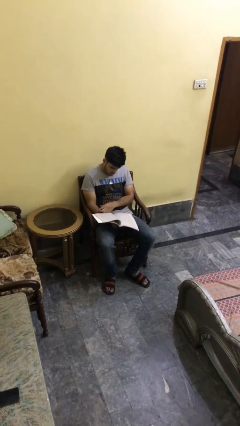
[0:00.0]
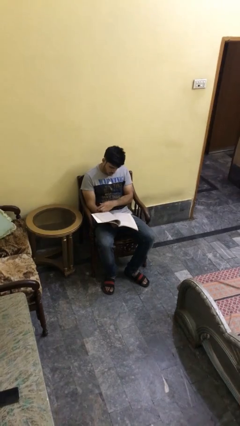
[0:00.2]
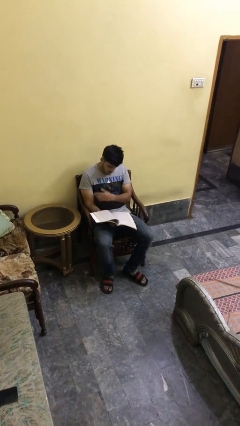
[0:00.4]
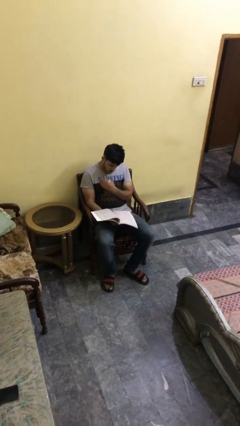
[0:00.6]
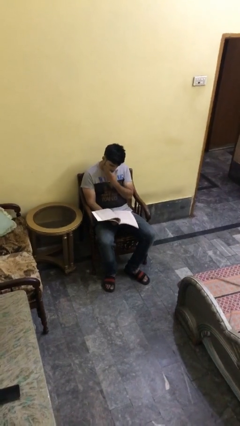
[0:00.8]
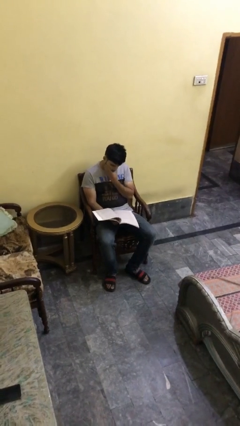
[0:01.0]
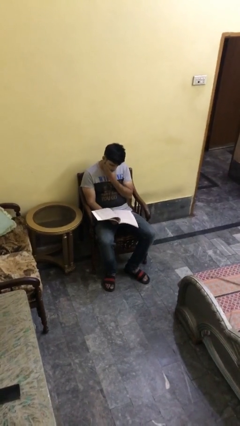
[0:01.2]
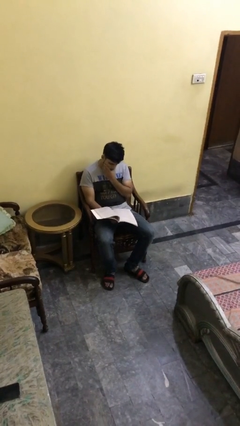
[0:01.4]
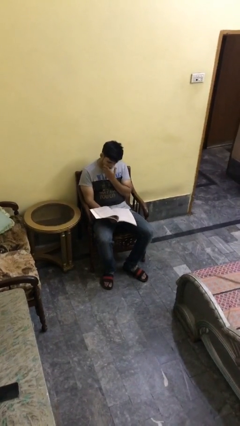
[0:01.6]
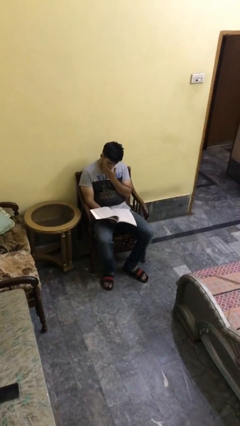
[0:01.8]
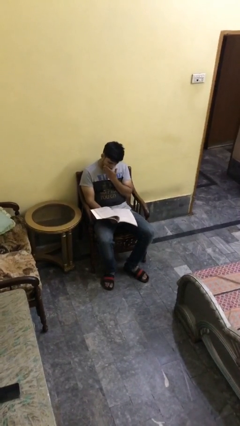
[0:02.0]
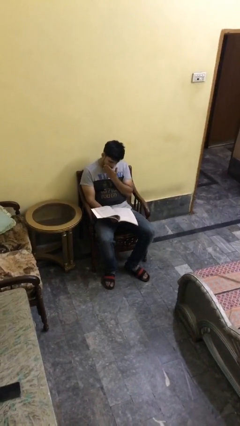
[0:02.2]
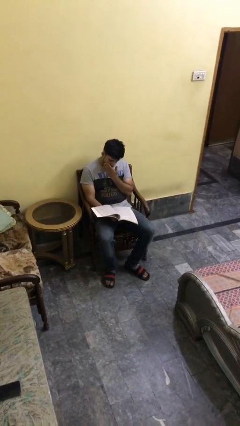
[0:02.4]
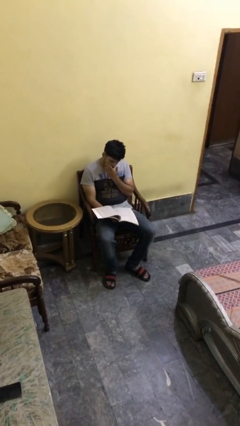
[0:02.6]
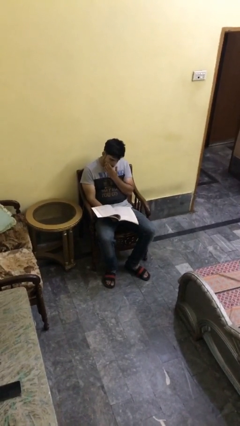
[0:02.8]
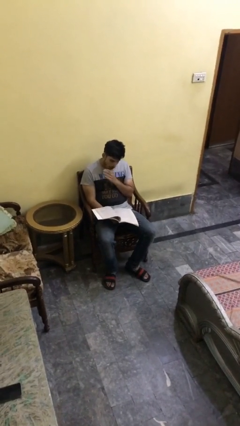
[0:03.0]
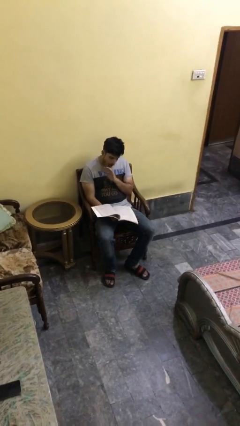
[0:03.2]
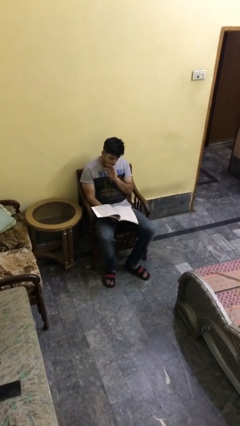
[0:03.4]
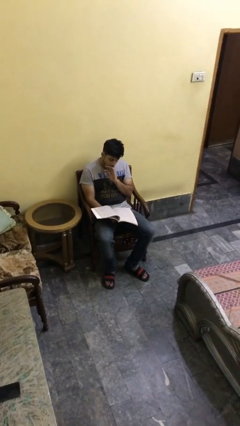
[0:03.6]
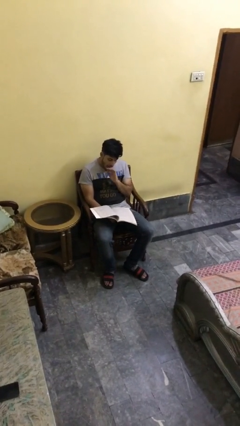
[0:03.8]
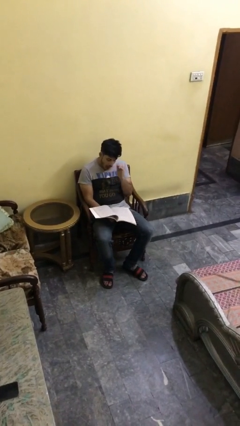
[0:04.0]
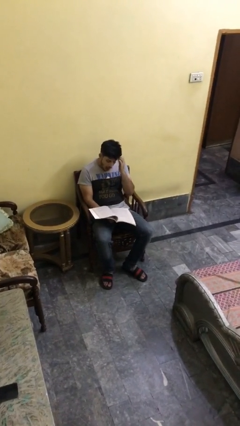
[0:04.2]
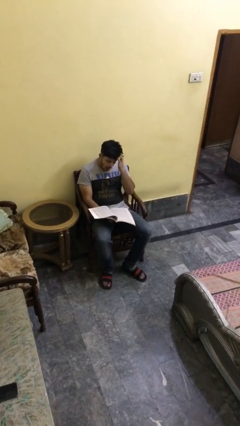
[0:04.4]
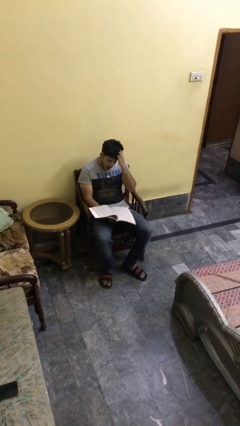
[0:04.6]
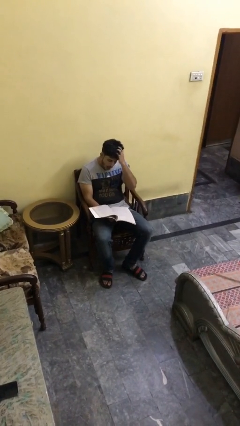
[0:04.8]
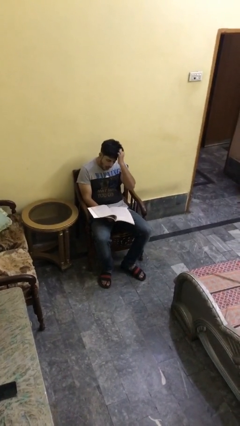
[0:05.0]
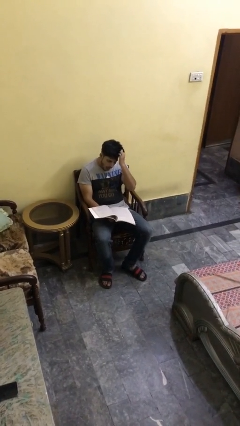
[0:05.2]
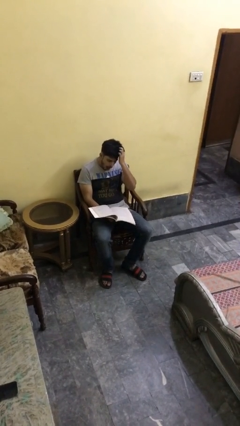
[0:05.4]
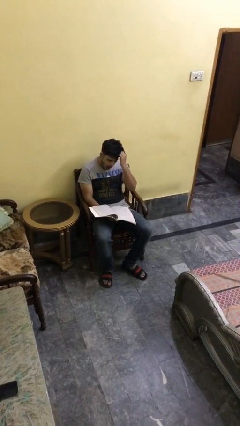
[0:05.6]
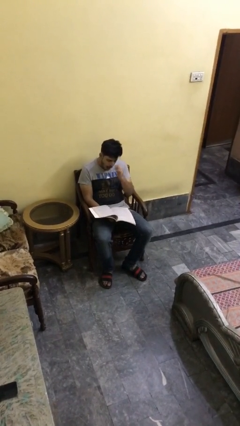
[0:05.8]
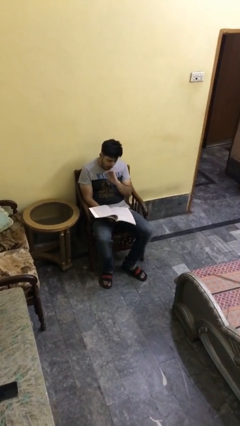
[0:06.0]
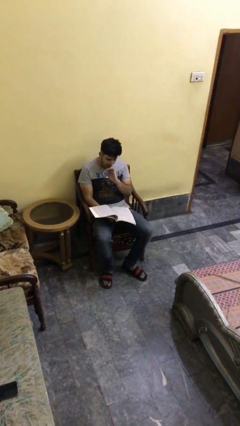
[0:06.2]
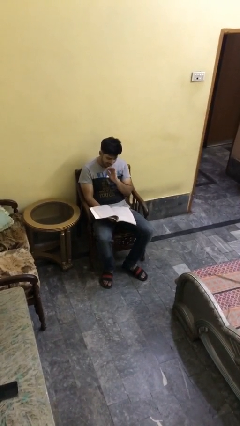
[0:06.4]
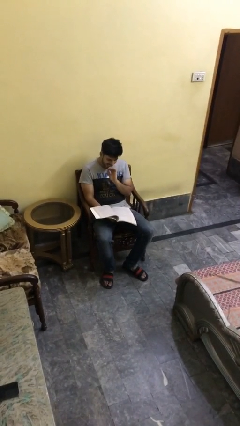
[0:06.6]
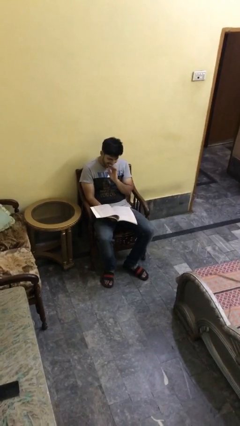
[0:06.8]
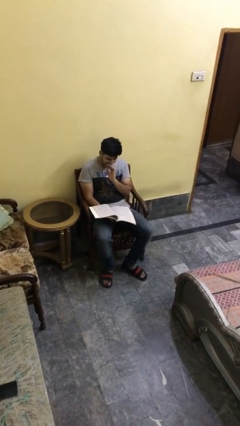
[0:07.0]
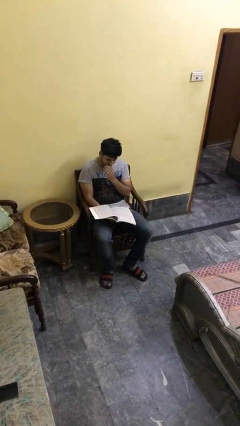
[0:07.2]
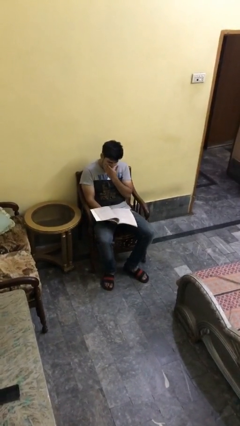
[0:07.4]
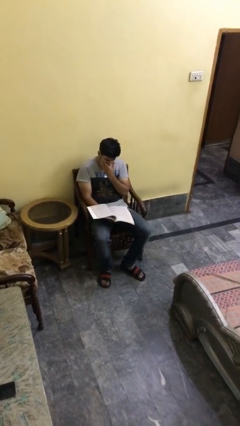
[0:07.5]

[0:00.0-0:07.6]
person reads document

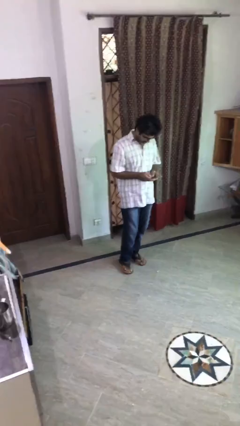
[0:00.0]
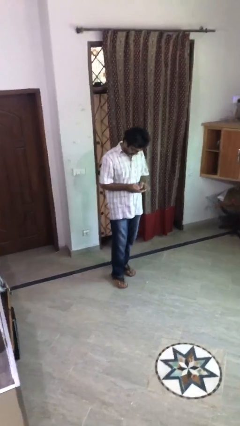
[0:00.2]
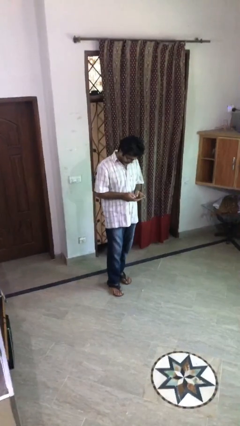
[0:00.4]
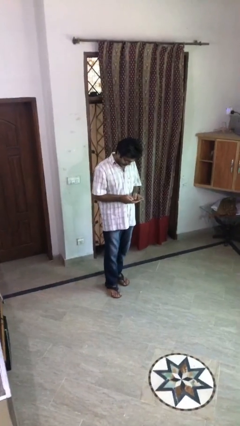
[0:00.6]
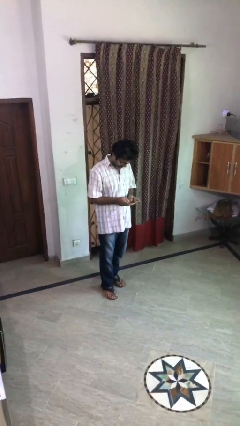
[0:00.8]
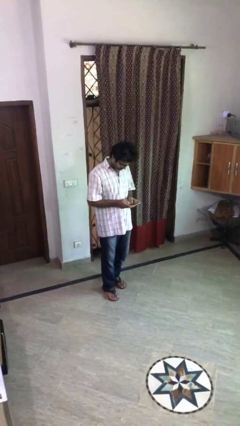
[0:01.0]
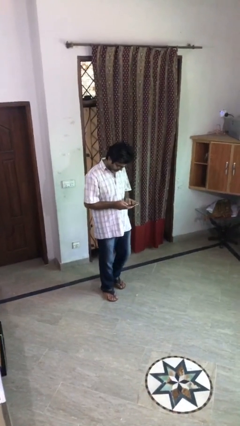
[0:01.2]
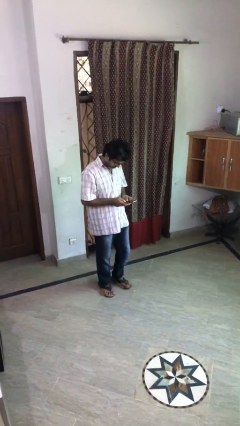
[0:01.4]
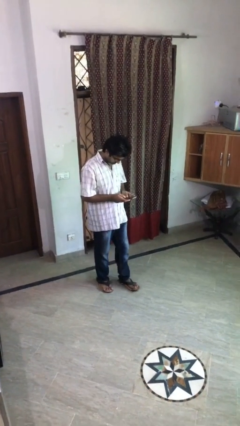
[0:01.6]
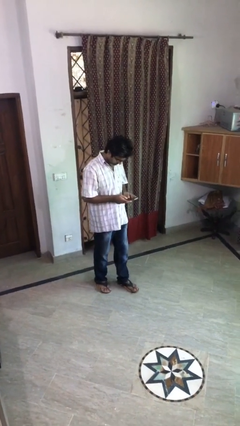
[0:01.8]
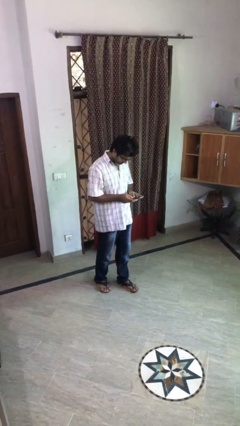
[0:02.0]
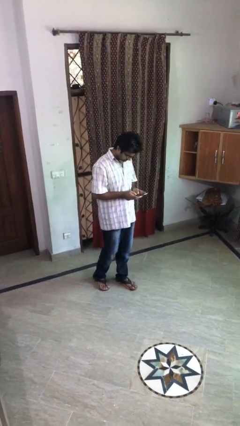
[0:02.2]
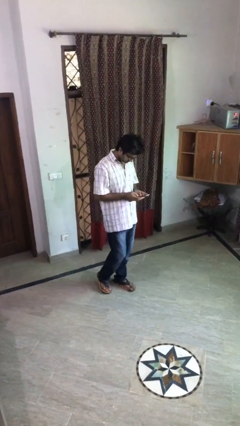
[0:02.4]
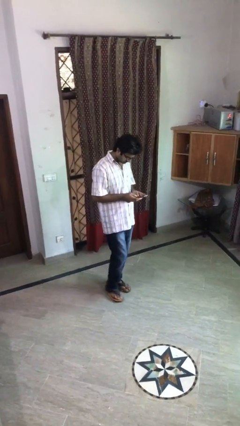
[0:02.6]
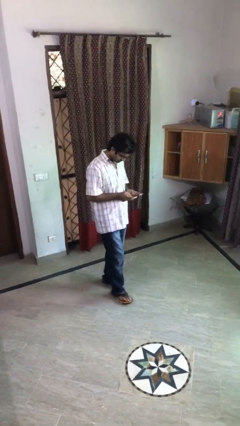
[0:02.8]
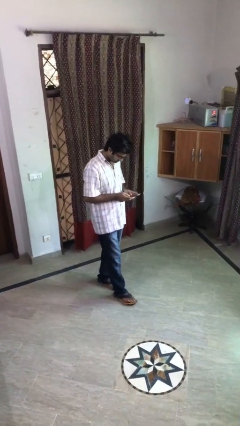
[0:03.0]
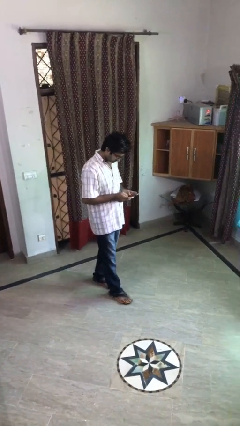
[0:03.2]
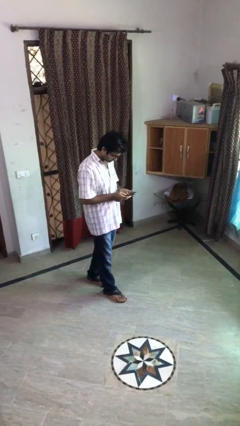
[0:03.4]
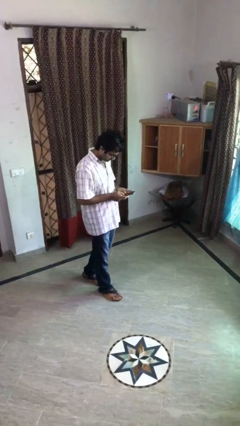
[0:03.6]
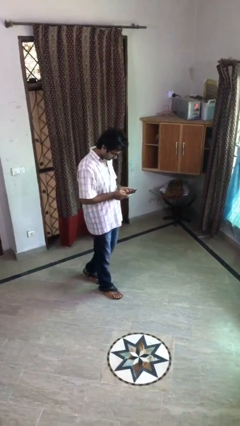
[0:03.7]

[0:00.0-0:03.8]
person texts on phone

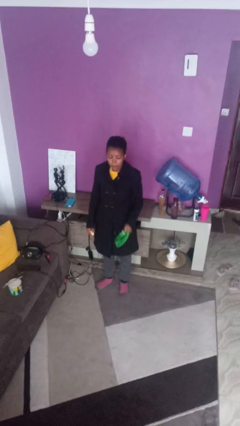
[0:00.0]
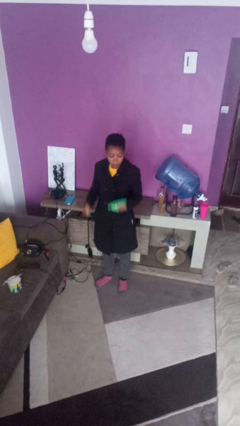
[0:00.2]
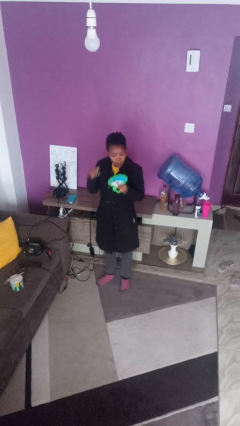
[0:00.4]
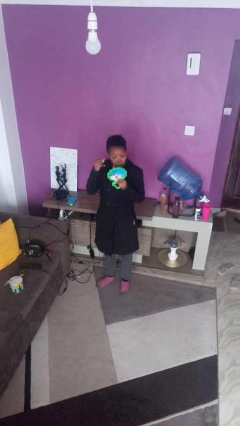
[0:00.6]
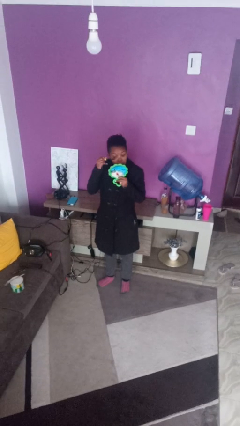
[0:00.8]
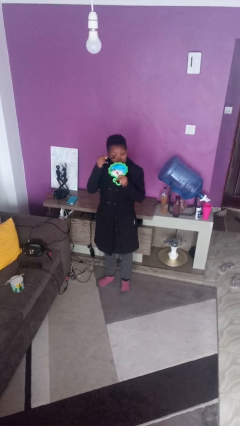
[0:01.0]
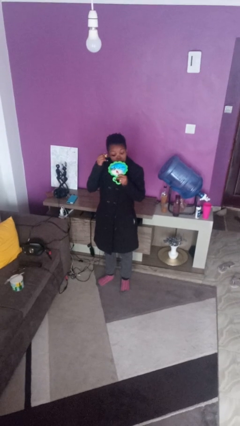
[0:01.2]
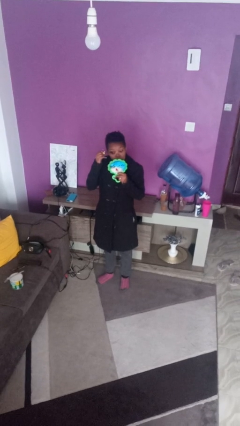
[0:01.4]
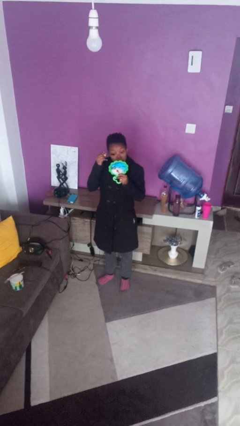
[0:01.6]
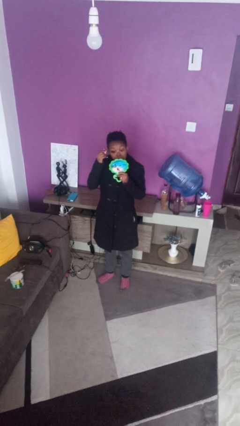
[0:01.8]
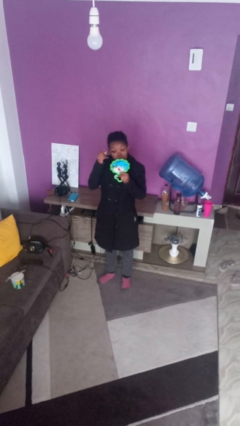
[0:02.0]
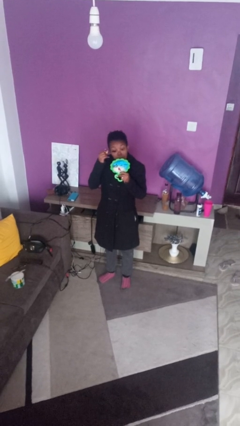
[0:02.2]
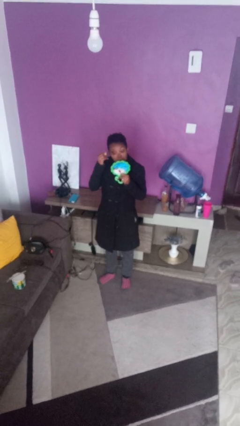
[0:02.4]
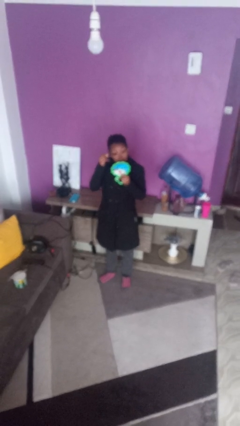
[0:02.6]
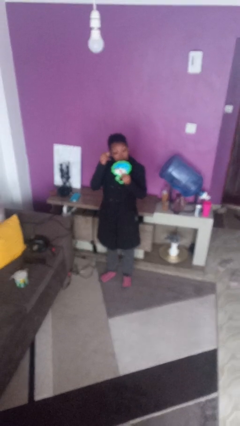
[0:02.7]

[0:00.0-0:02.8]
person applies eye makeup

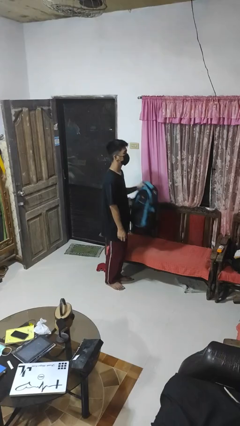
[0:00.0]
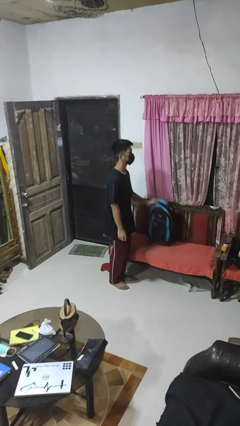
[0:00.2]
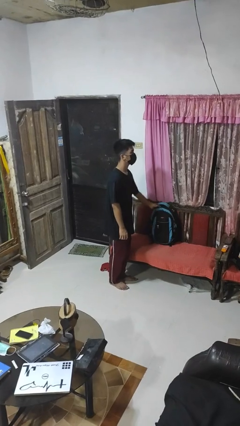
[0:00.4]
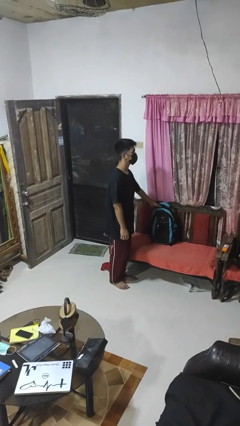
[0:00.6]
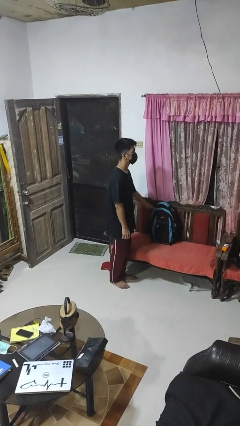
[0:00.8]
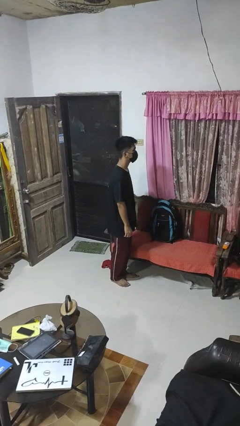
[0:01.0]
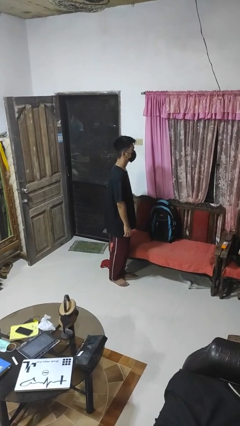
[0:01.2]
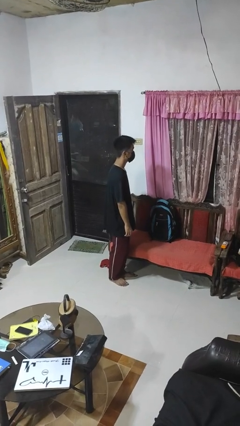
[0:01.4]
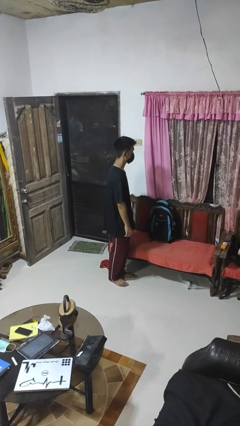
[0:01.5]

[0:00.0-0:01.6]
person puts down object on couch

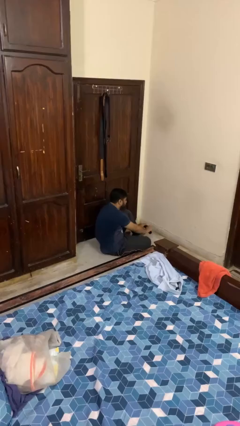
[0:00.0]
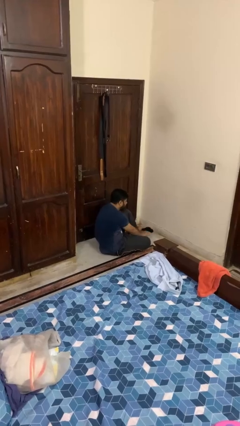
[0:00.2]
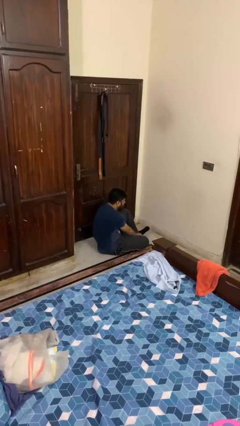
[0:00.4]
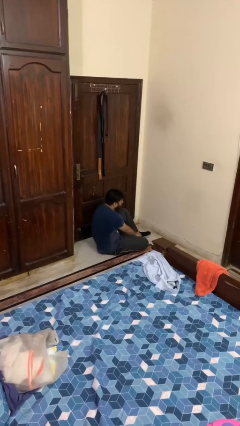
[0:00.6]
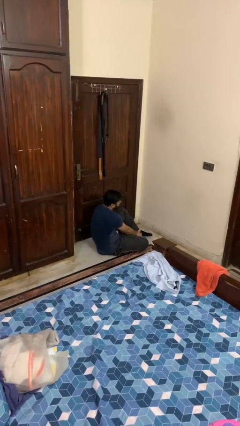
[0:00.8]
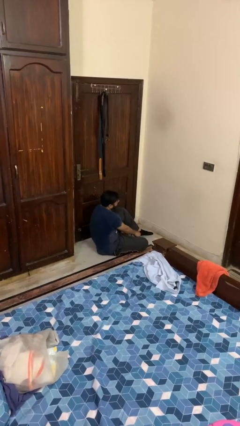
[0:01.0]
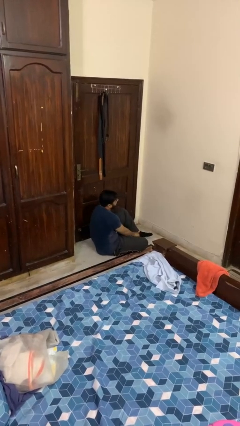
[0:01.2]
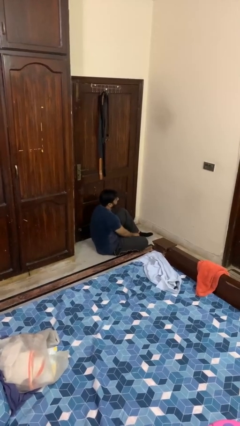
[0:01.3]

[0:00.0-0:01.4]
person puts on socks

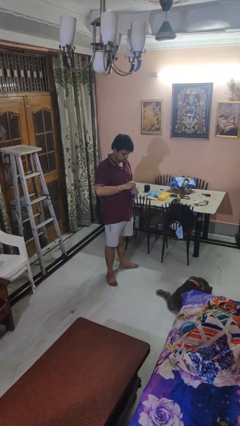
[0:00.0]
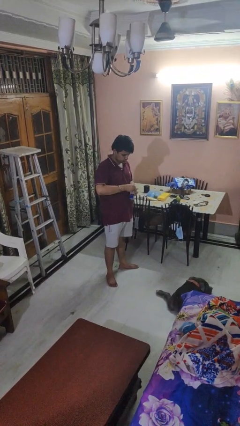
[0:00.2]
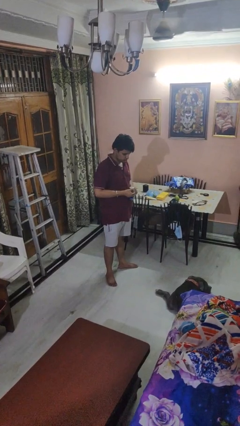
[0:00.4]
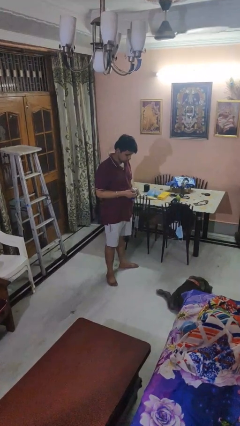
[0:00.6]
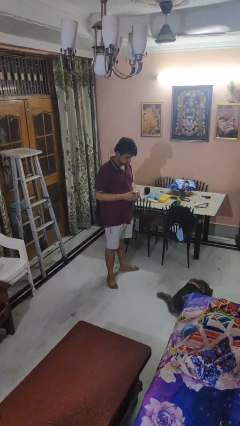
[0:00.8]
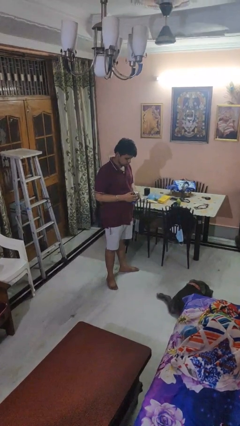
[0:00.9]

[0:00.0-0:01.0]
person opens beverage can
